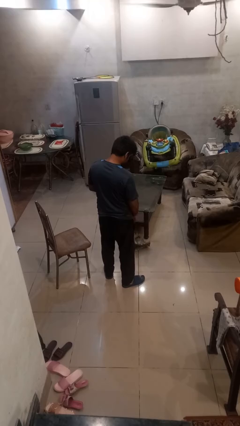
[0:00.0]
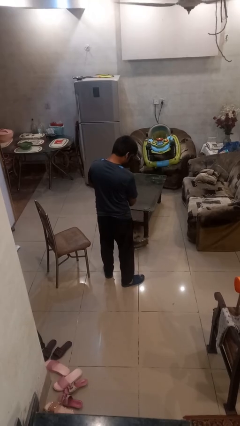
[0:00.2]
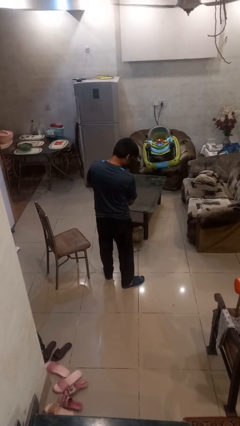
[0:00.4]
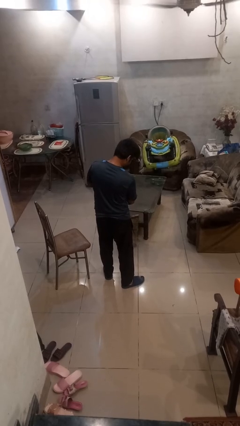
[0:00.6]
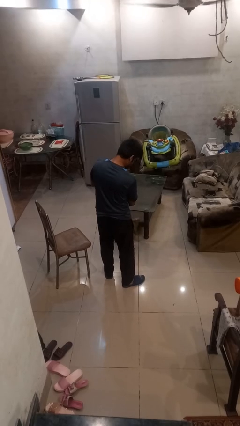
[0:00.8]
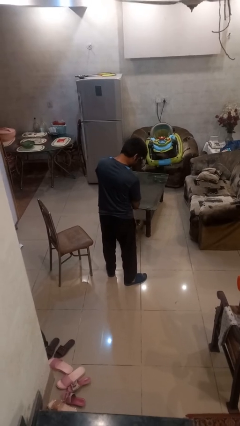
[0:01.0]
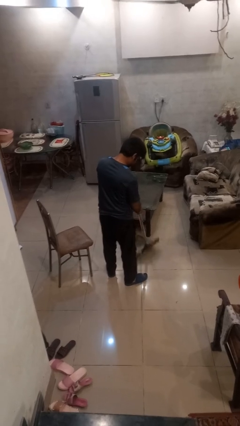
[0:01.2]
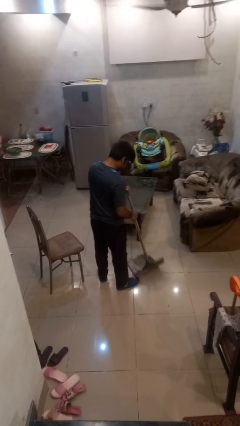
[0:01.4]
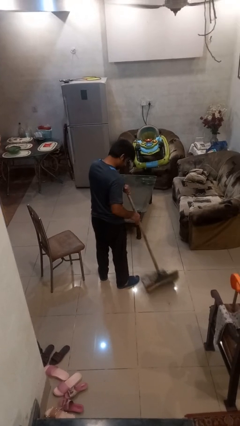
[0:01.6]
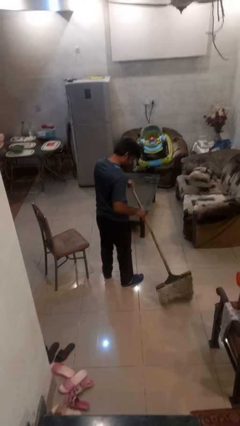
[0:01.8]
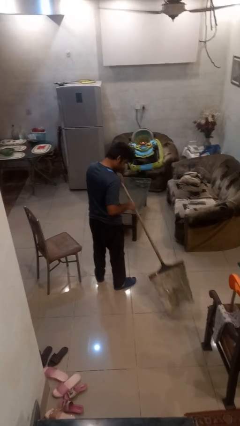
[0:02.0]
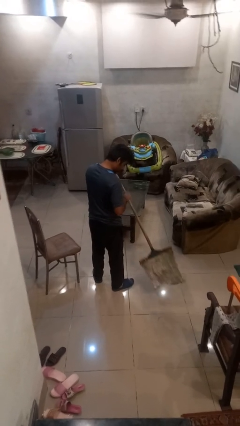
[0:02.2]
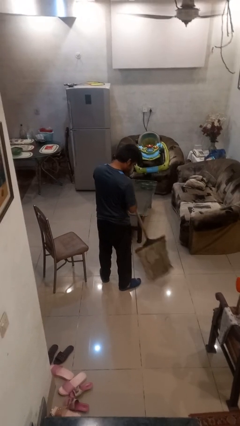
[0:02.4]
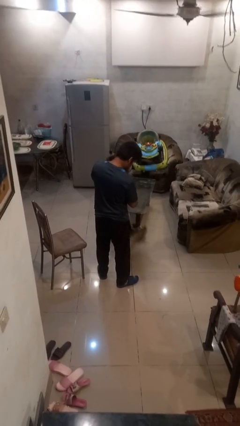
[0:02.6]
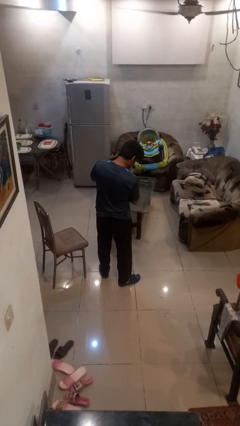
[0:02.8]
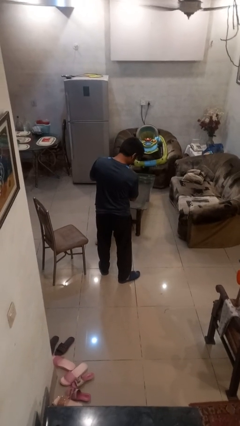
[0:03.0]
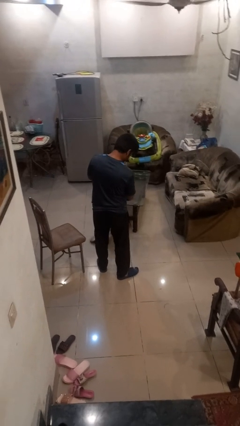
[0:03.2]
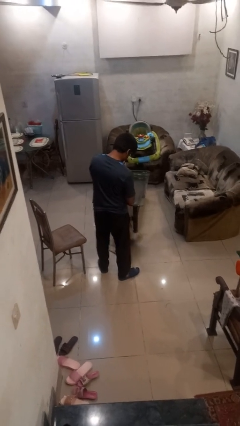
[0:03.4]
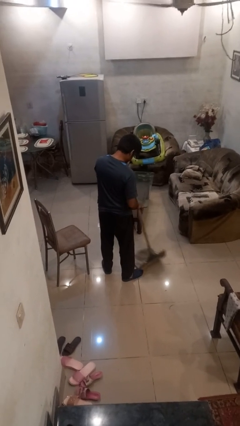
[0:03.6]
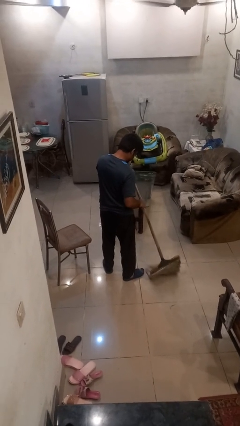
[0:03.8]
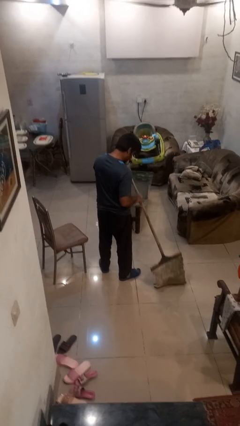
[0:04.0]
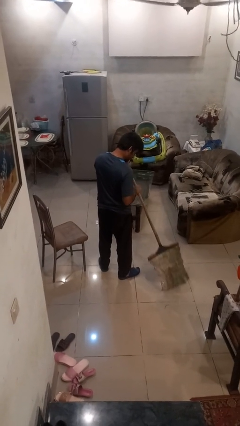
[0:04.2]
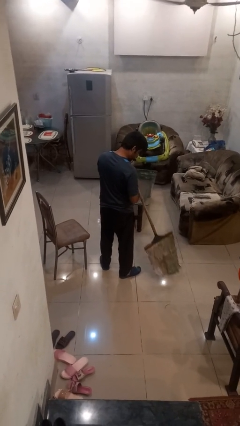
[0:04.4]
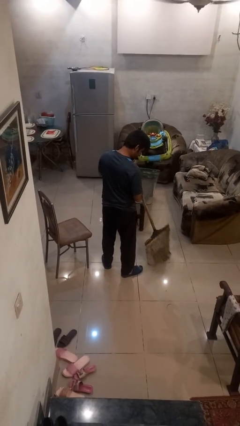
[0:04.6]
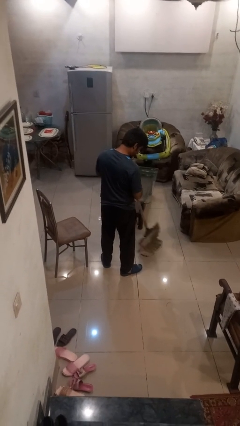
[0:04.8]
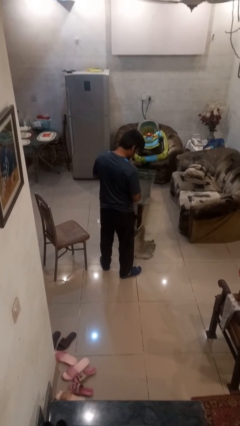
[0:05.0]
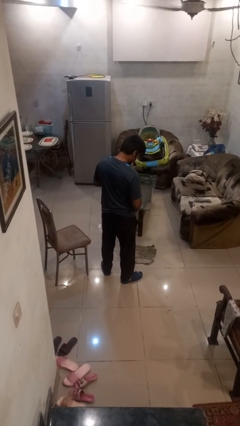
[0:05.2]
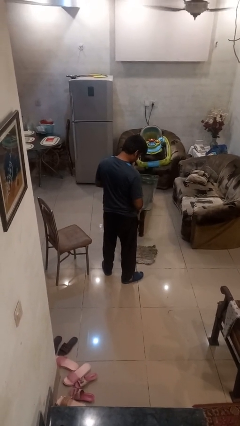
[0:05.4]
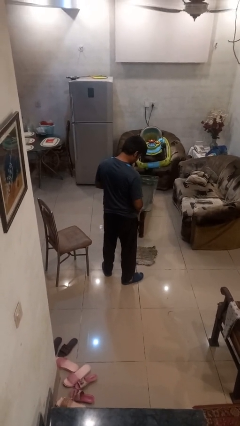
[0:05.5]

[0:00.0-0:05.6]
person mops

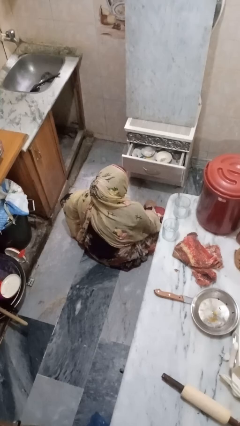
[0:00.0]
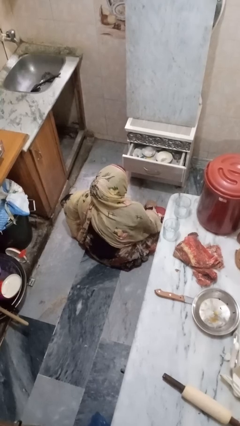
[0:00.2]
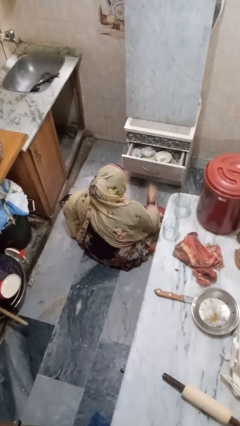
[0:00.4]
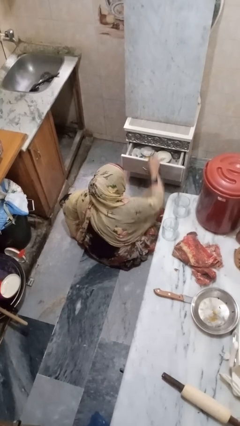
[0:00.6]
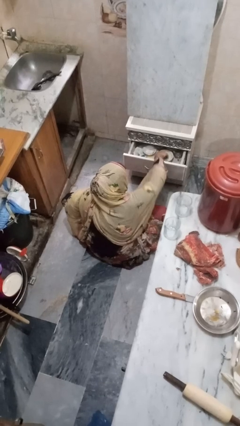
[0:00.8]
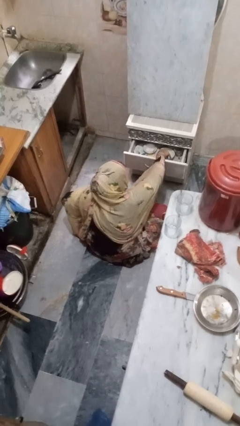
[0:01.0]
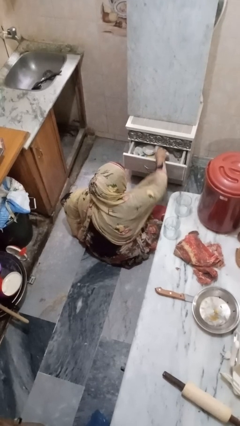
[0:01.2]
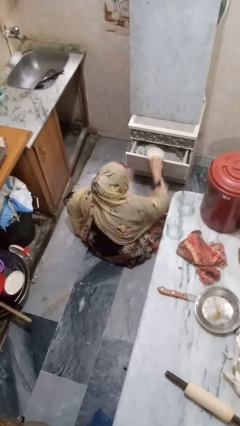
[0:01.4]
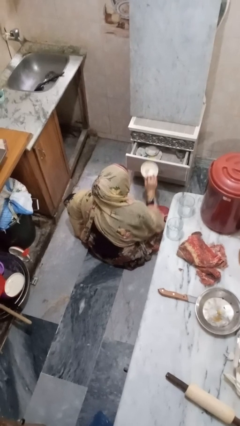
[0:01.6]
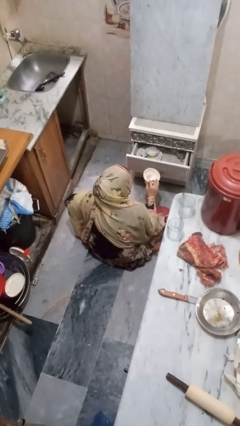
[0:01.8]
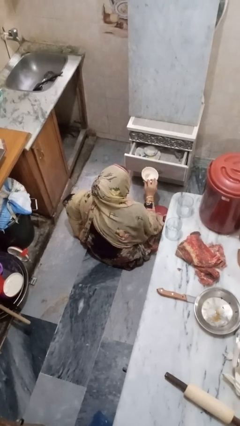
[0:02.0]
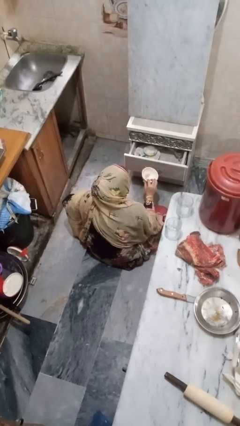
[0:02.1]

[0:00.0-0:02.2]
person takes object from kitchen drawer

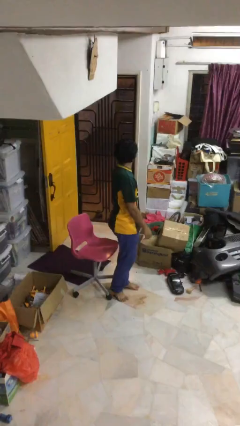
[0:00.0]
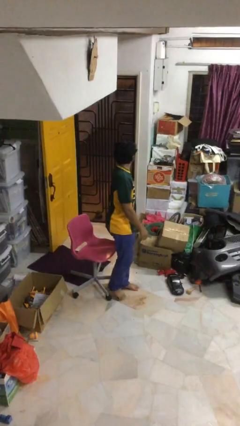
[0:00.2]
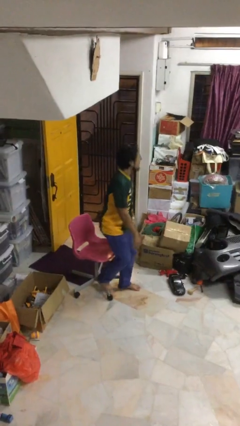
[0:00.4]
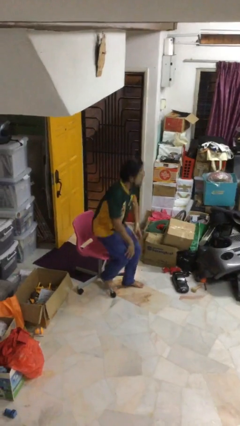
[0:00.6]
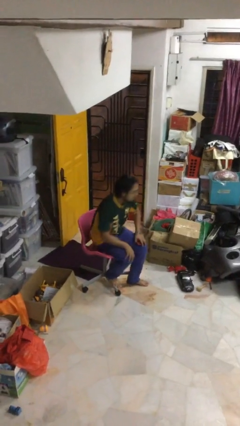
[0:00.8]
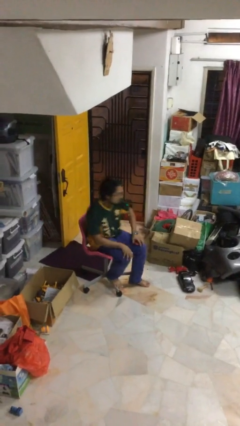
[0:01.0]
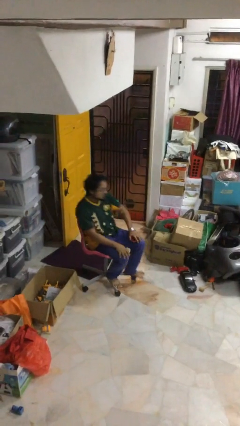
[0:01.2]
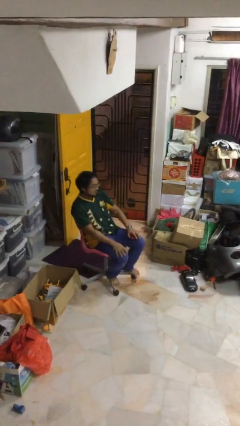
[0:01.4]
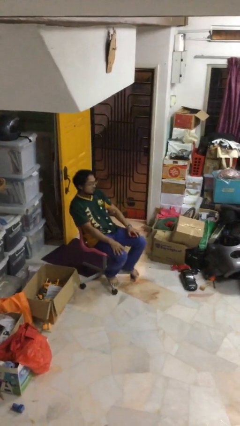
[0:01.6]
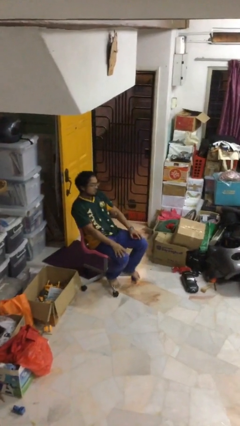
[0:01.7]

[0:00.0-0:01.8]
person sits down

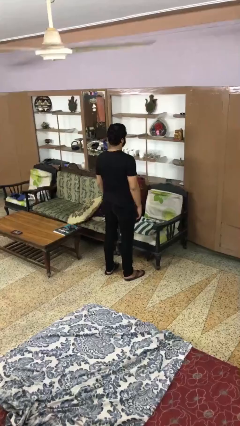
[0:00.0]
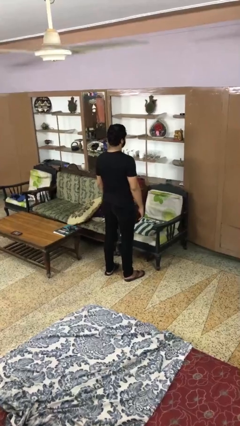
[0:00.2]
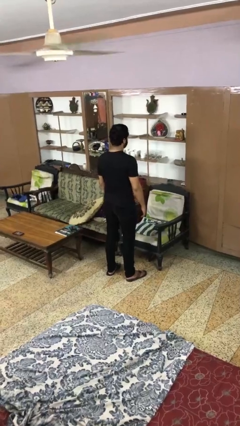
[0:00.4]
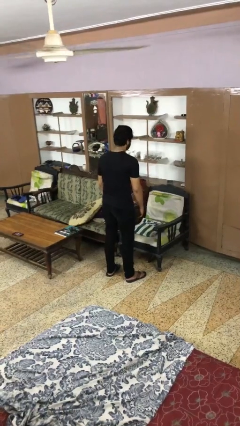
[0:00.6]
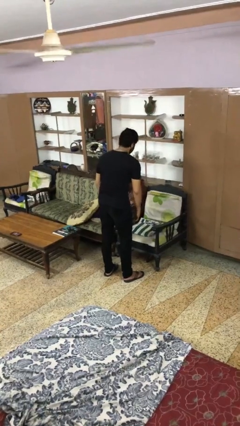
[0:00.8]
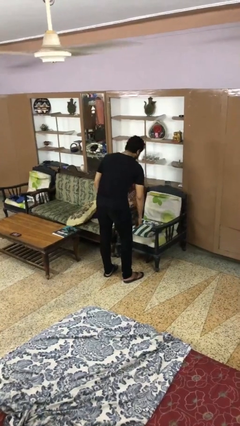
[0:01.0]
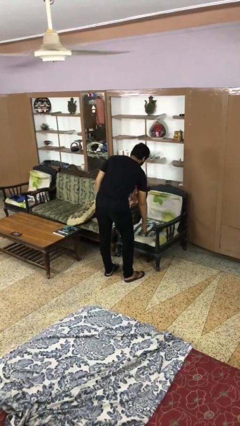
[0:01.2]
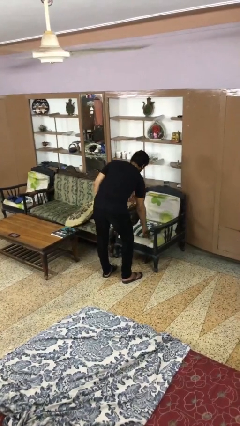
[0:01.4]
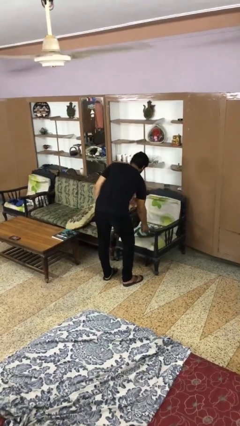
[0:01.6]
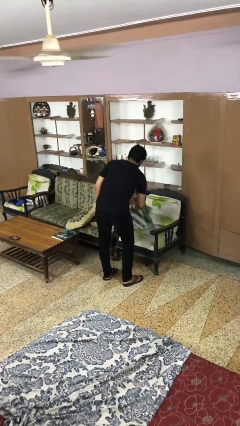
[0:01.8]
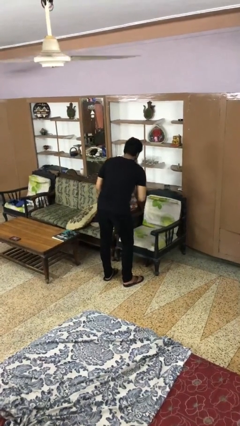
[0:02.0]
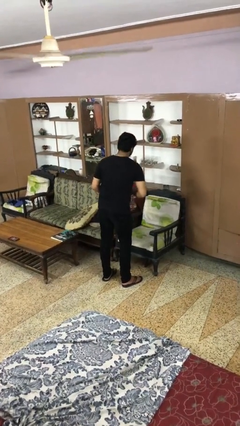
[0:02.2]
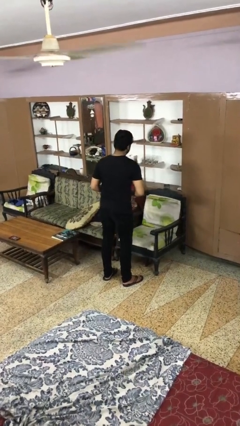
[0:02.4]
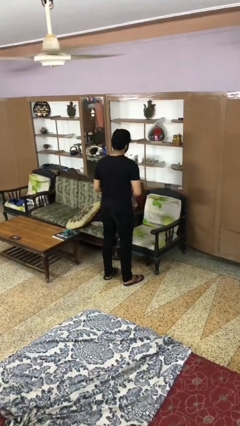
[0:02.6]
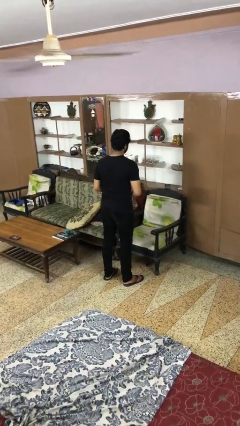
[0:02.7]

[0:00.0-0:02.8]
person picks up object from couch

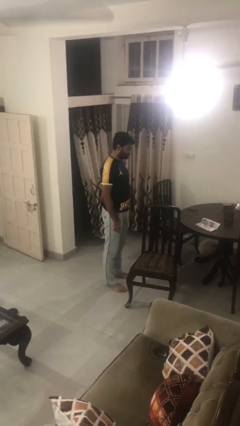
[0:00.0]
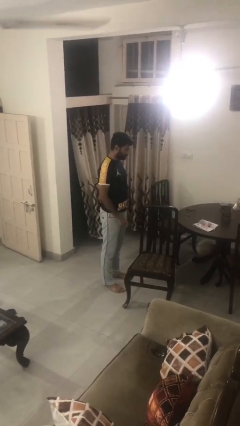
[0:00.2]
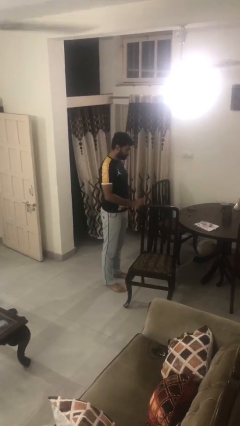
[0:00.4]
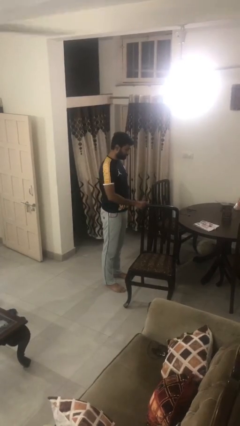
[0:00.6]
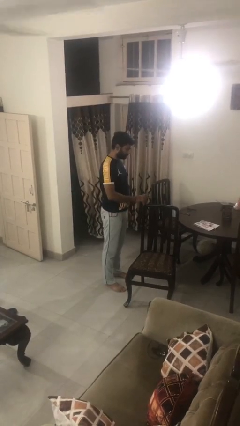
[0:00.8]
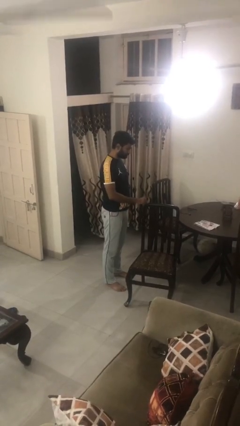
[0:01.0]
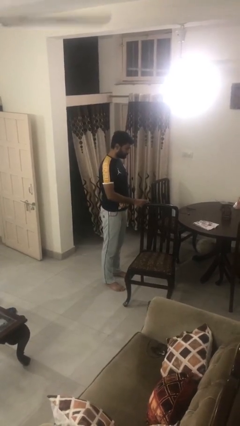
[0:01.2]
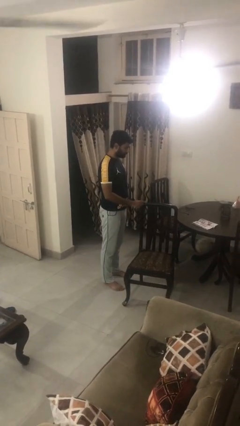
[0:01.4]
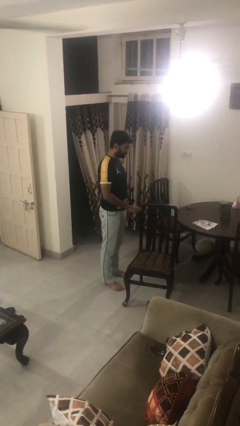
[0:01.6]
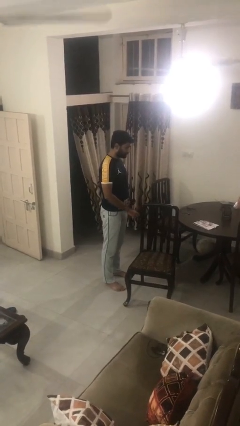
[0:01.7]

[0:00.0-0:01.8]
person taps object with finger

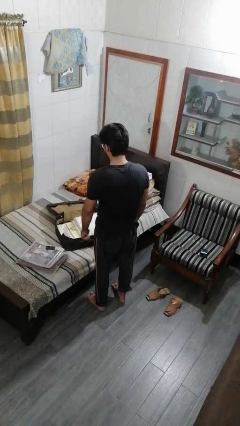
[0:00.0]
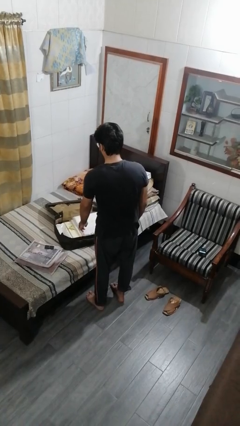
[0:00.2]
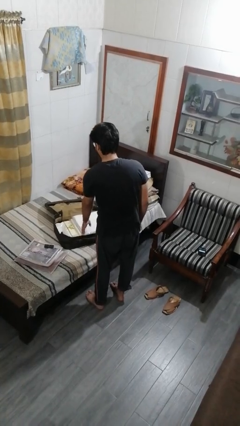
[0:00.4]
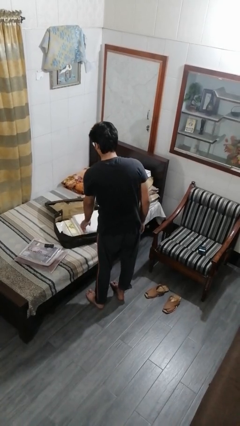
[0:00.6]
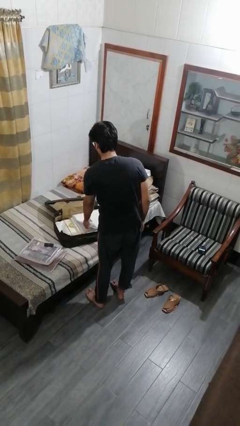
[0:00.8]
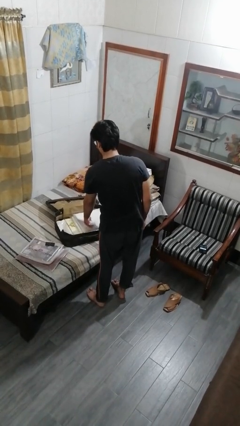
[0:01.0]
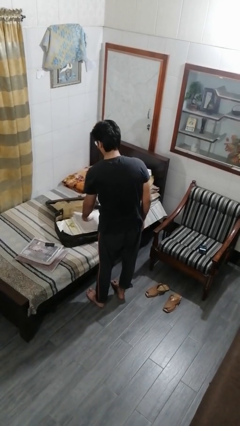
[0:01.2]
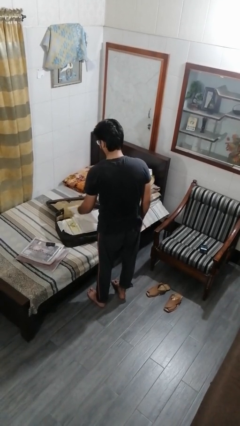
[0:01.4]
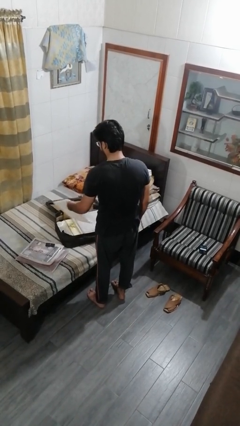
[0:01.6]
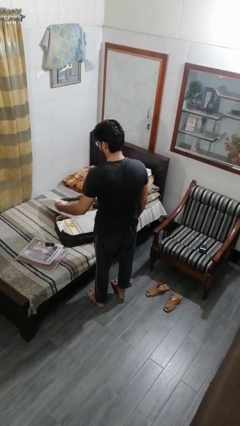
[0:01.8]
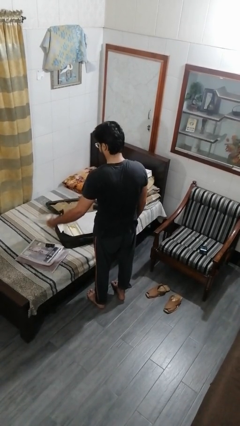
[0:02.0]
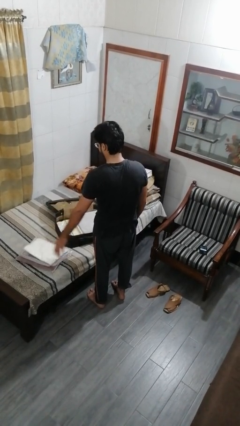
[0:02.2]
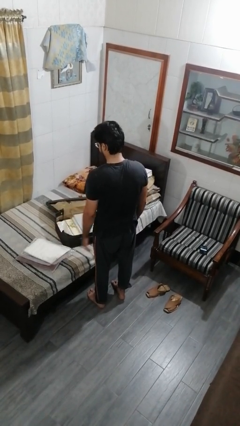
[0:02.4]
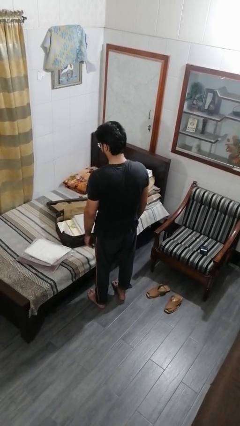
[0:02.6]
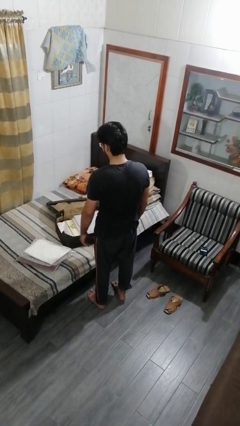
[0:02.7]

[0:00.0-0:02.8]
person unloads clothes from suitcase
